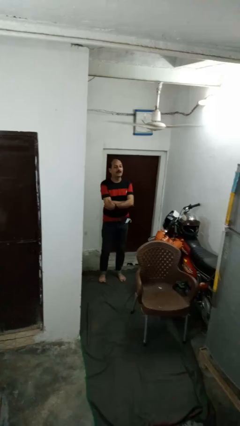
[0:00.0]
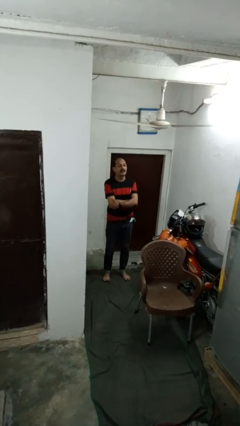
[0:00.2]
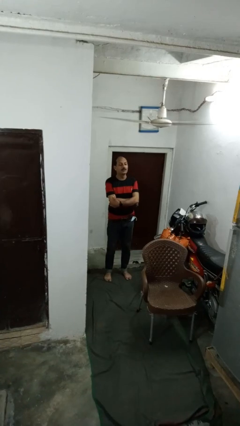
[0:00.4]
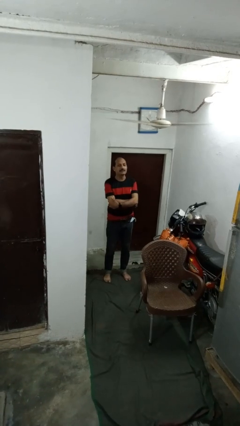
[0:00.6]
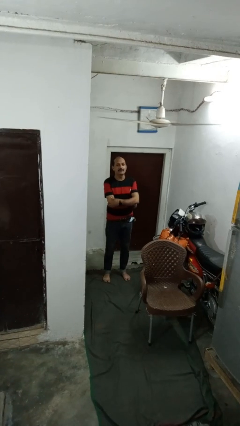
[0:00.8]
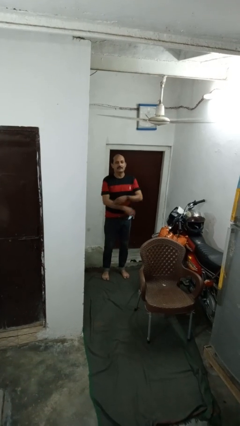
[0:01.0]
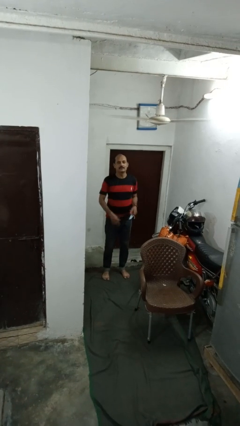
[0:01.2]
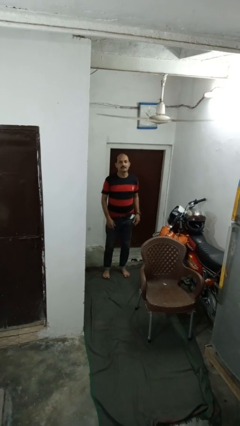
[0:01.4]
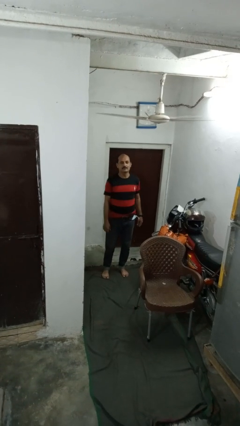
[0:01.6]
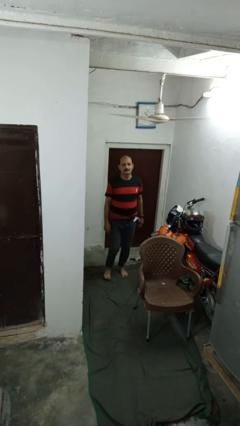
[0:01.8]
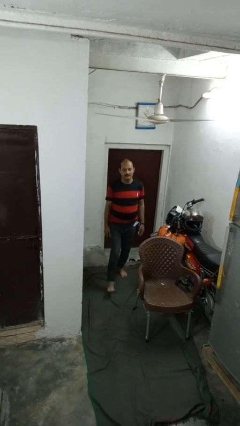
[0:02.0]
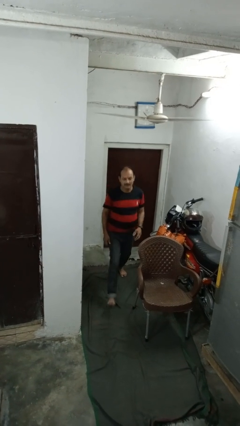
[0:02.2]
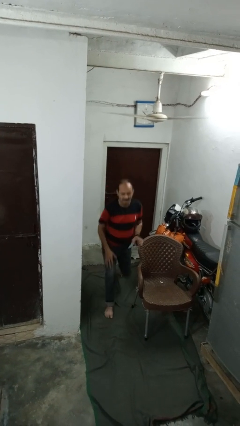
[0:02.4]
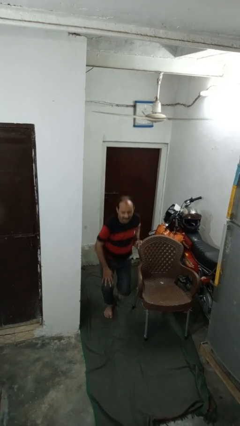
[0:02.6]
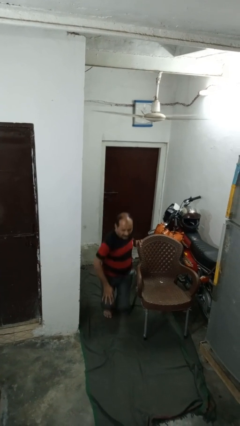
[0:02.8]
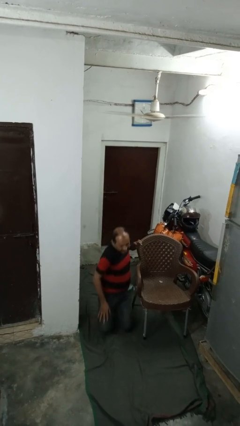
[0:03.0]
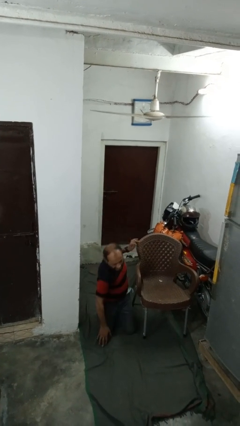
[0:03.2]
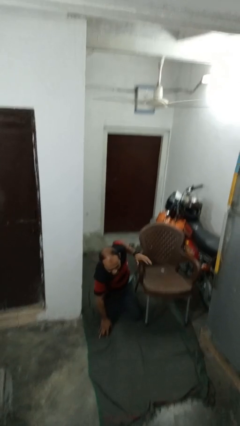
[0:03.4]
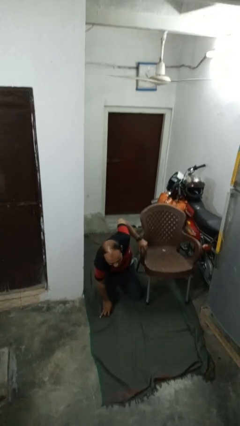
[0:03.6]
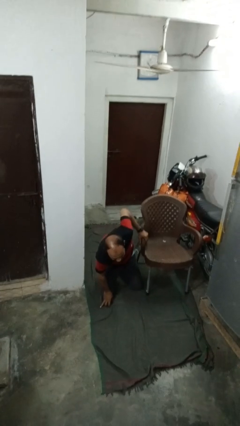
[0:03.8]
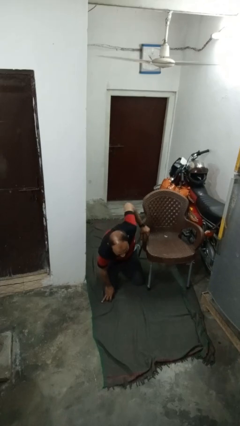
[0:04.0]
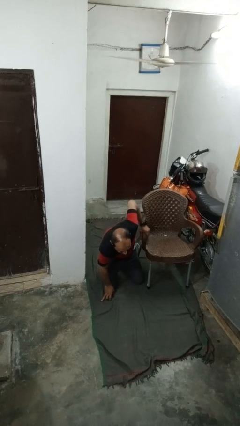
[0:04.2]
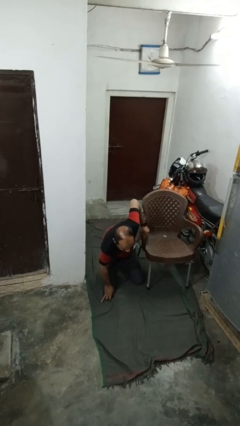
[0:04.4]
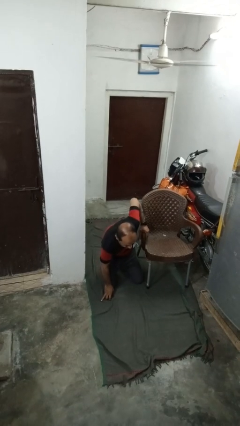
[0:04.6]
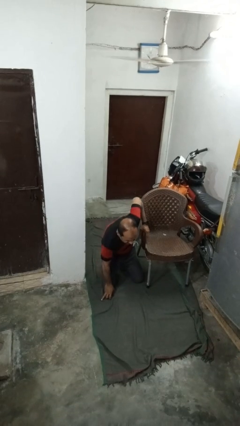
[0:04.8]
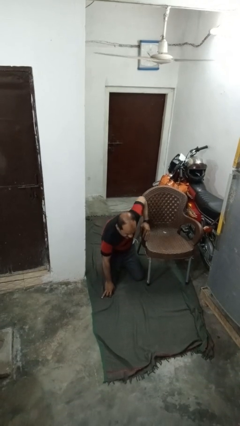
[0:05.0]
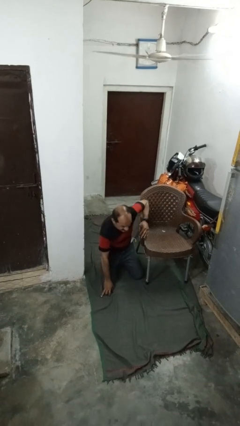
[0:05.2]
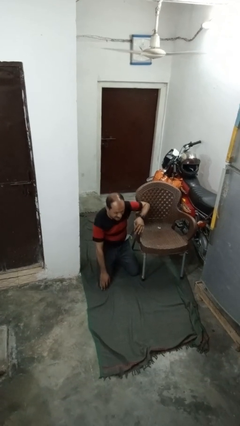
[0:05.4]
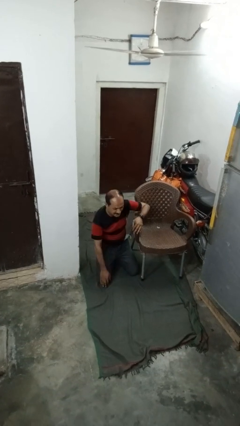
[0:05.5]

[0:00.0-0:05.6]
person trips on object on floor

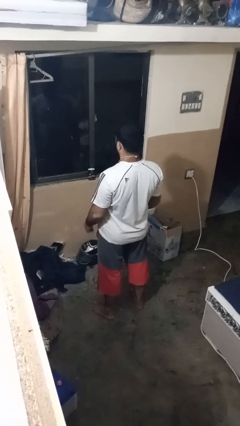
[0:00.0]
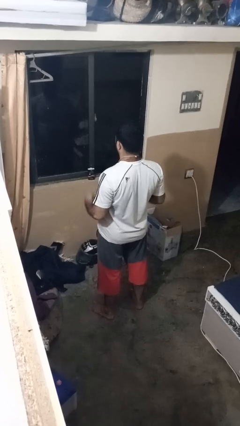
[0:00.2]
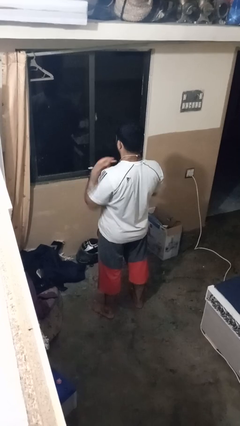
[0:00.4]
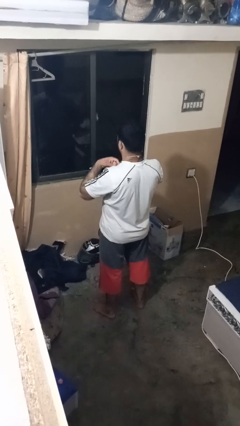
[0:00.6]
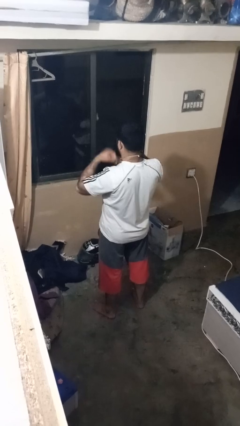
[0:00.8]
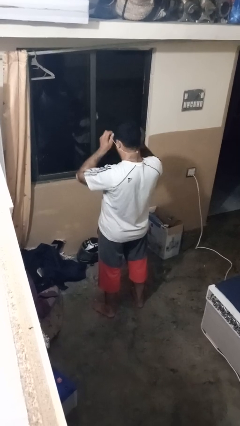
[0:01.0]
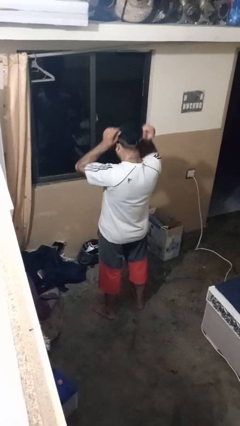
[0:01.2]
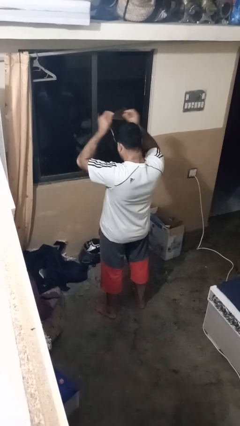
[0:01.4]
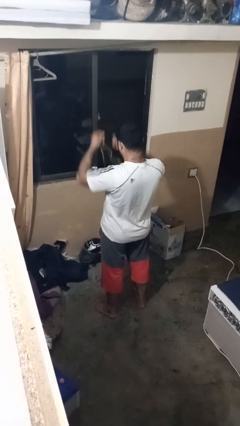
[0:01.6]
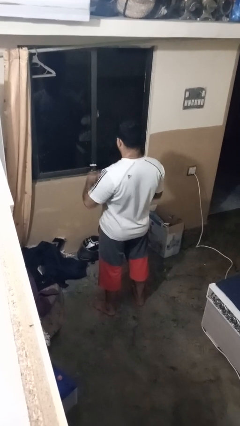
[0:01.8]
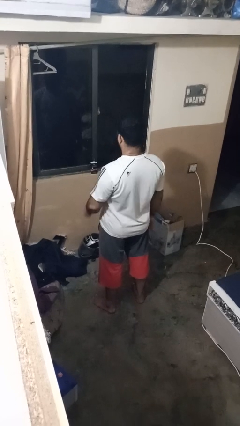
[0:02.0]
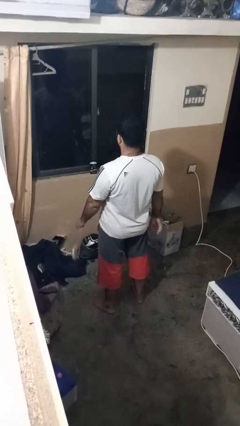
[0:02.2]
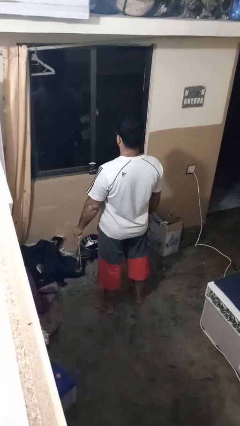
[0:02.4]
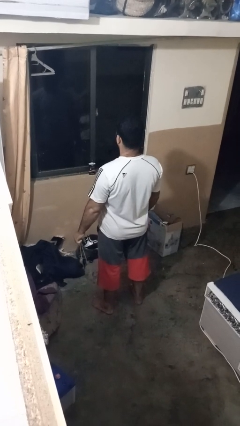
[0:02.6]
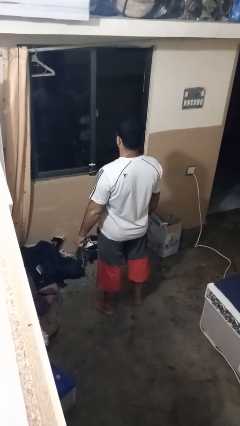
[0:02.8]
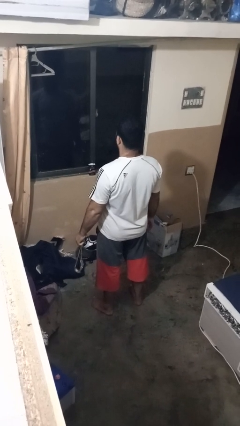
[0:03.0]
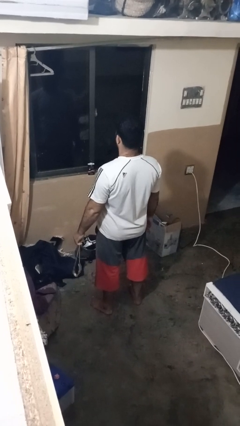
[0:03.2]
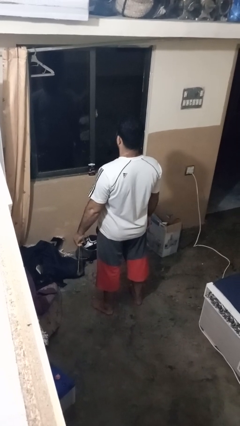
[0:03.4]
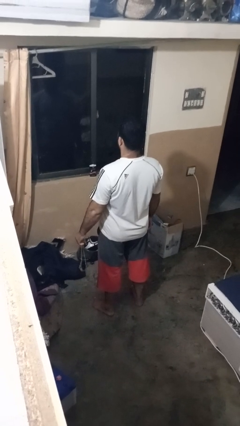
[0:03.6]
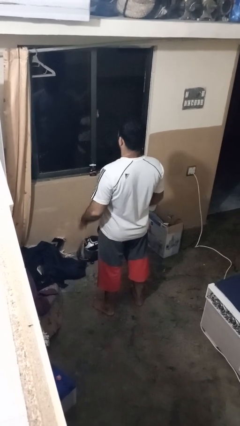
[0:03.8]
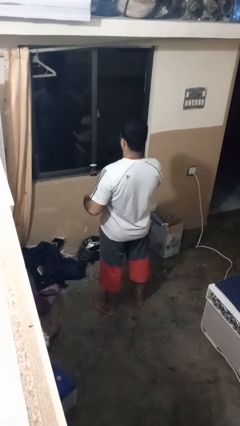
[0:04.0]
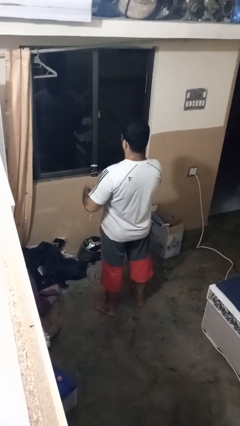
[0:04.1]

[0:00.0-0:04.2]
person takes off necklace

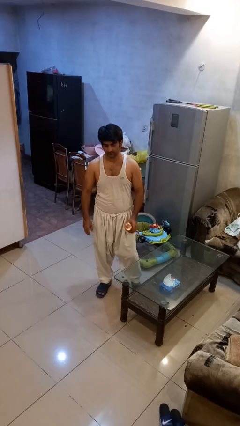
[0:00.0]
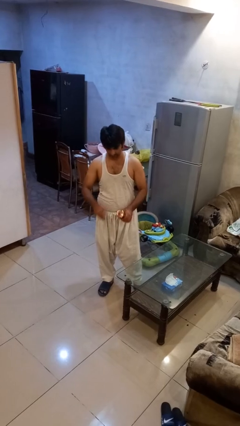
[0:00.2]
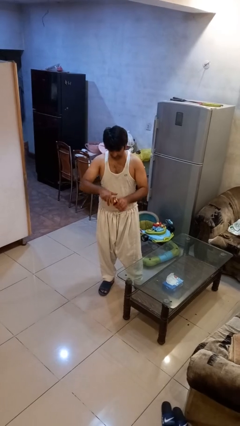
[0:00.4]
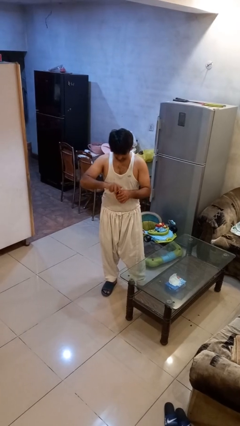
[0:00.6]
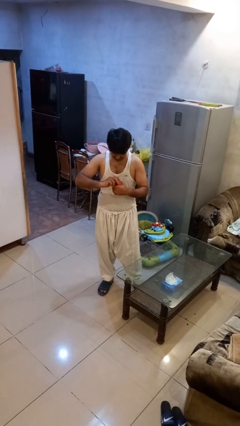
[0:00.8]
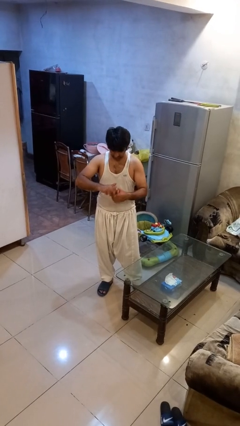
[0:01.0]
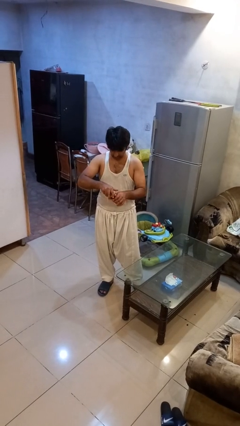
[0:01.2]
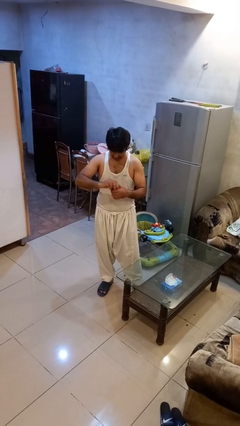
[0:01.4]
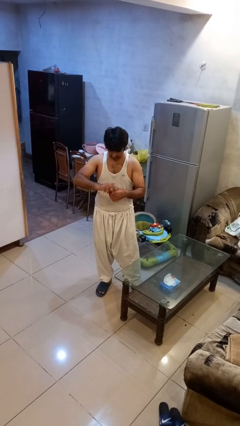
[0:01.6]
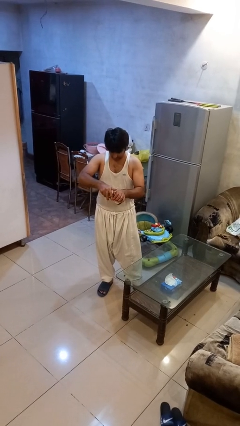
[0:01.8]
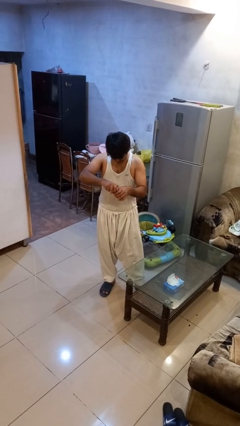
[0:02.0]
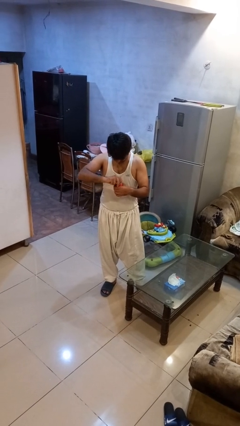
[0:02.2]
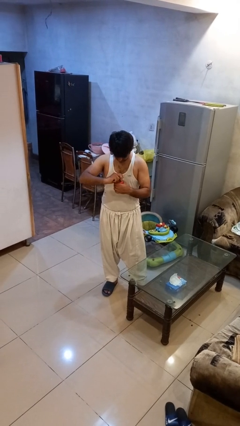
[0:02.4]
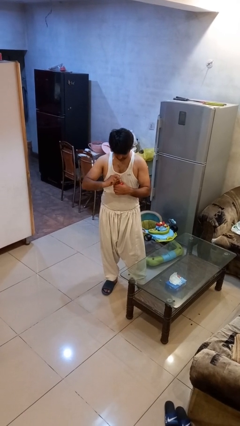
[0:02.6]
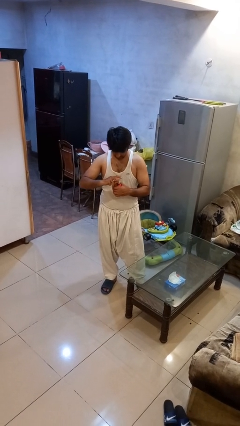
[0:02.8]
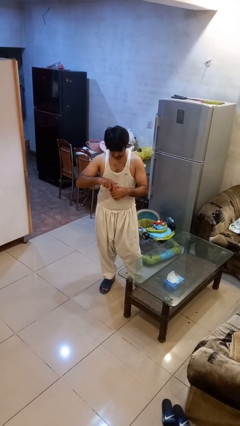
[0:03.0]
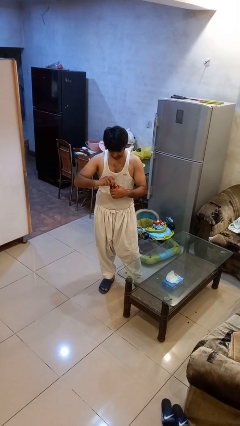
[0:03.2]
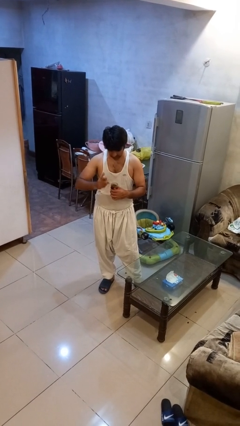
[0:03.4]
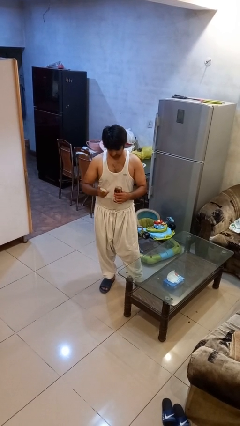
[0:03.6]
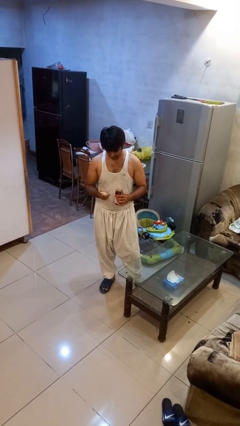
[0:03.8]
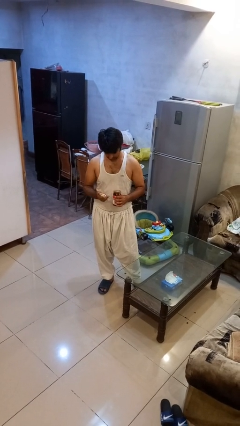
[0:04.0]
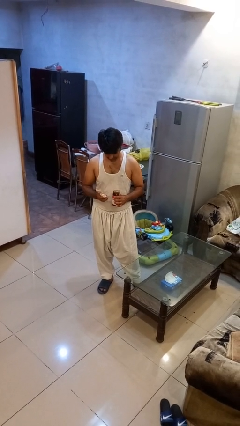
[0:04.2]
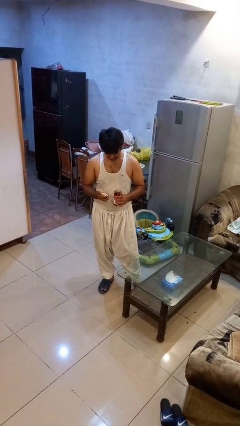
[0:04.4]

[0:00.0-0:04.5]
person opens jar

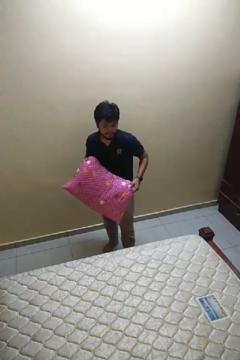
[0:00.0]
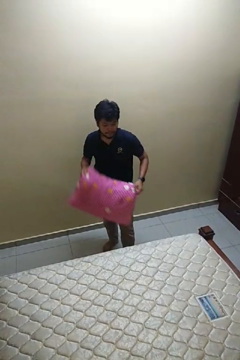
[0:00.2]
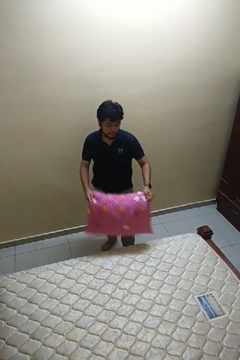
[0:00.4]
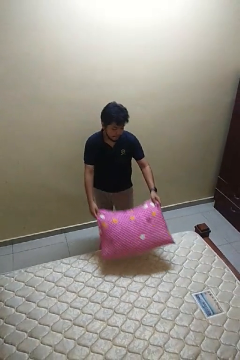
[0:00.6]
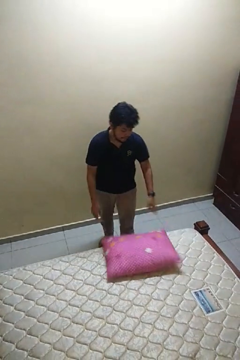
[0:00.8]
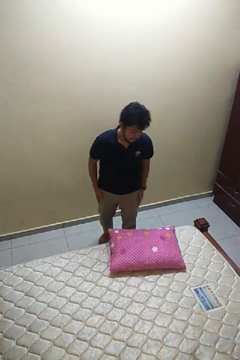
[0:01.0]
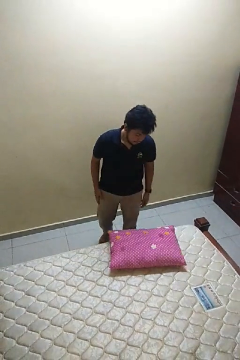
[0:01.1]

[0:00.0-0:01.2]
person puts down object on bed

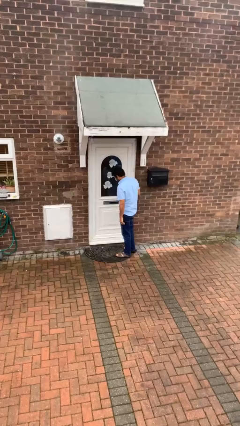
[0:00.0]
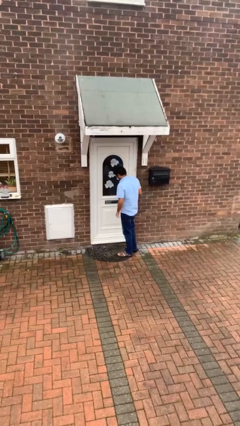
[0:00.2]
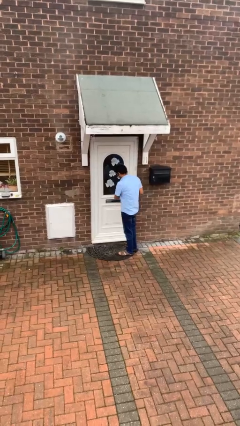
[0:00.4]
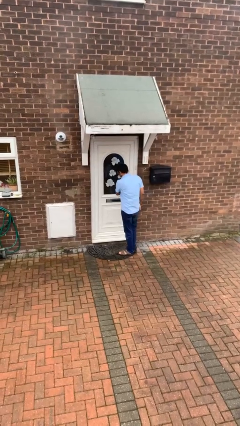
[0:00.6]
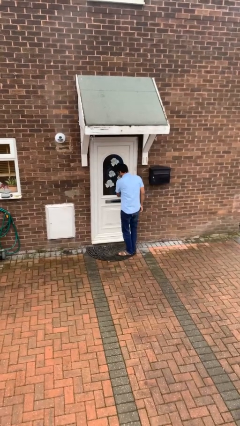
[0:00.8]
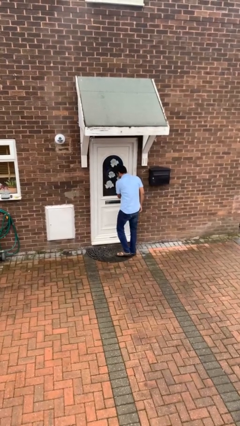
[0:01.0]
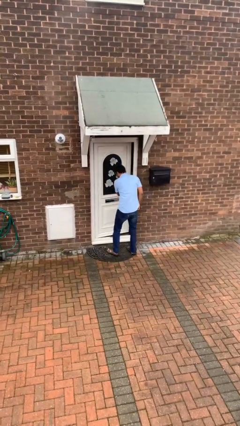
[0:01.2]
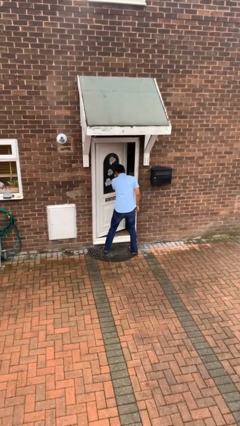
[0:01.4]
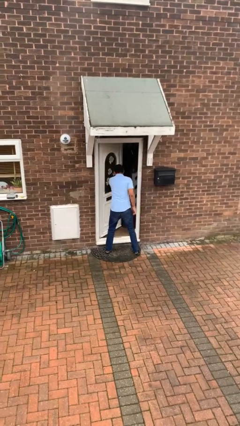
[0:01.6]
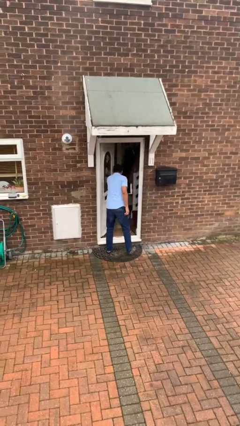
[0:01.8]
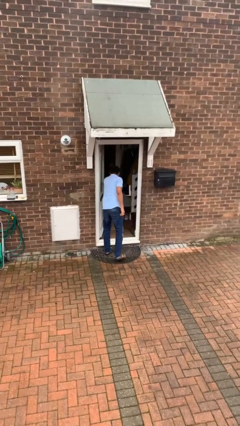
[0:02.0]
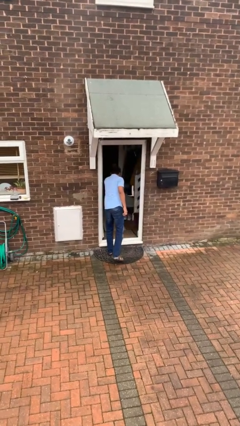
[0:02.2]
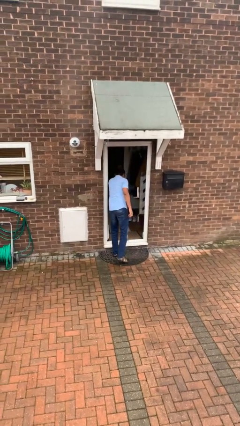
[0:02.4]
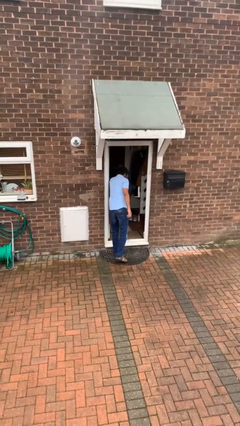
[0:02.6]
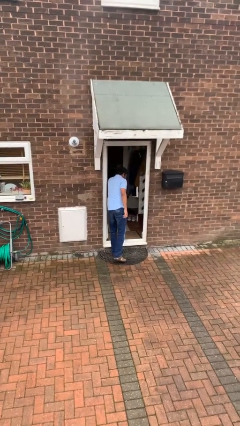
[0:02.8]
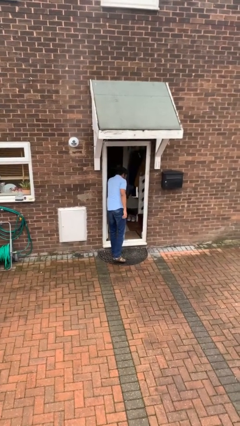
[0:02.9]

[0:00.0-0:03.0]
person opens facility door
